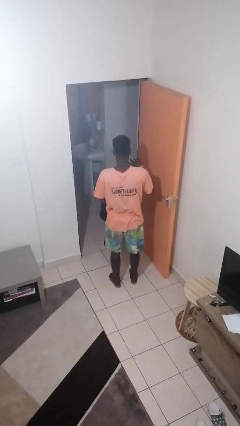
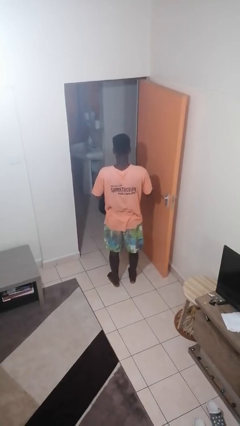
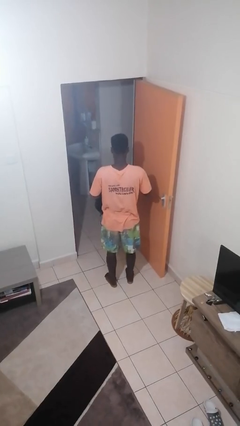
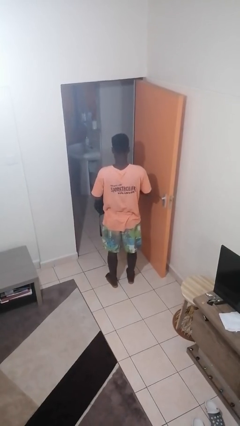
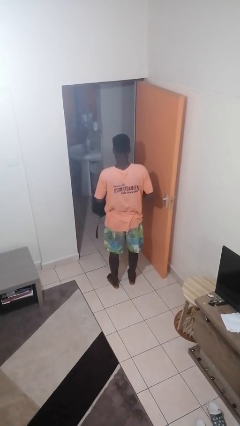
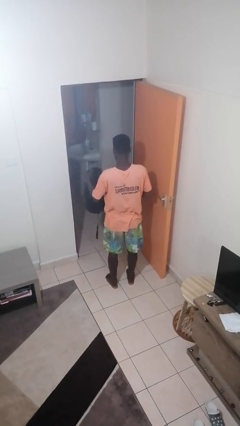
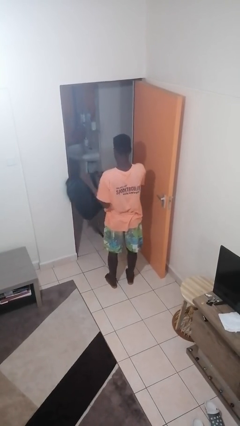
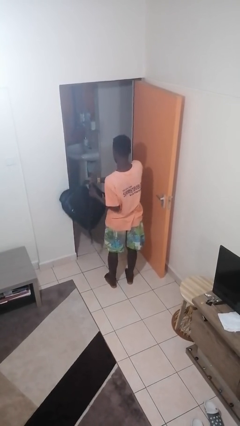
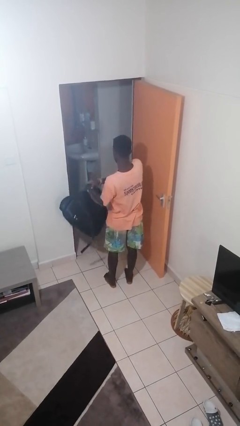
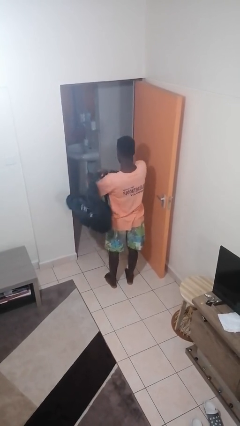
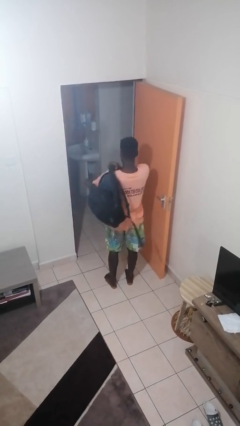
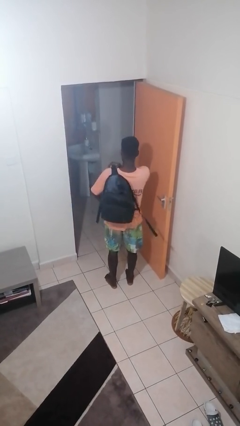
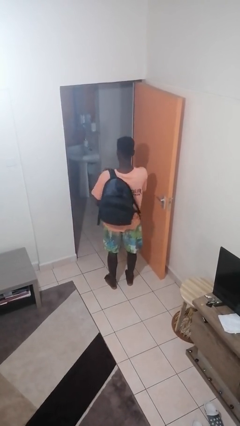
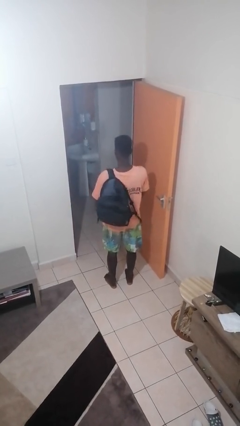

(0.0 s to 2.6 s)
person puts object into backpack

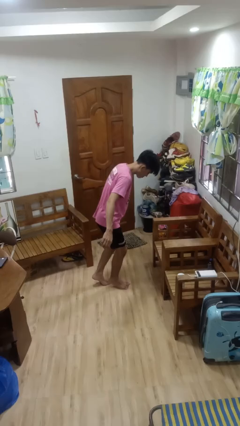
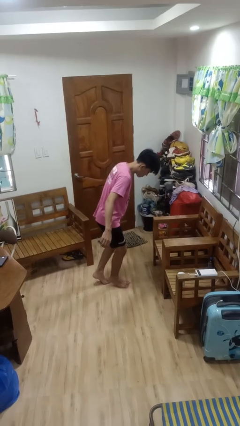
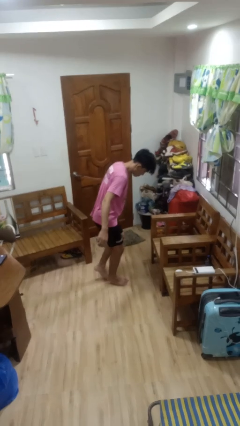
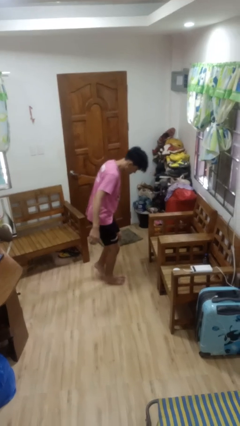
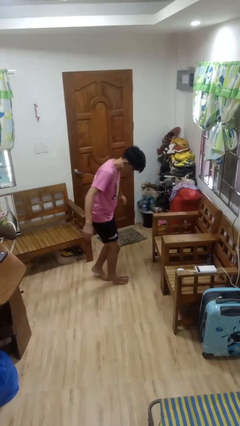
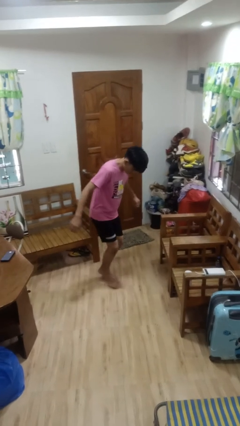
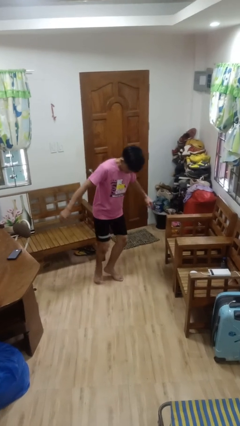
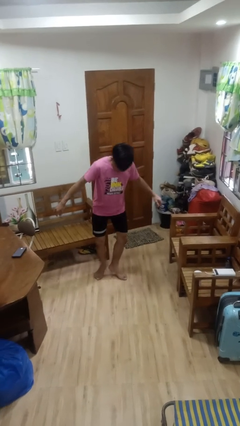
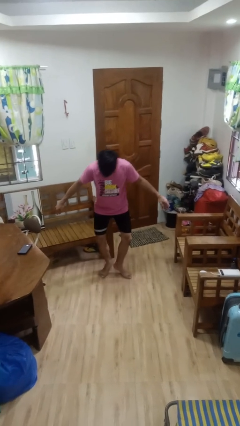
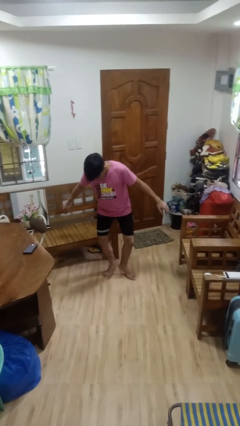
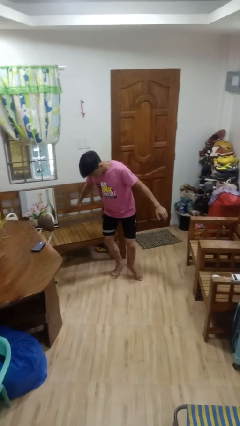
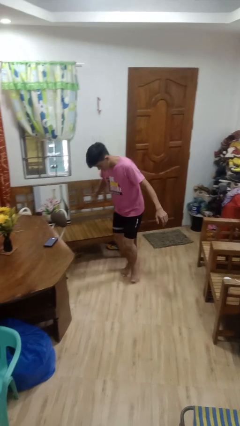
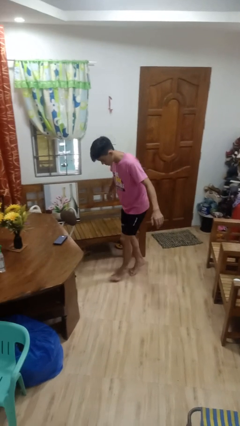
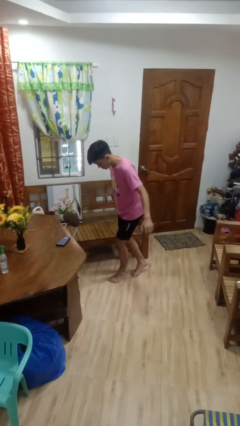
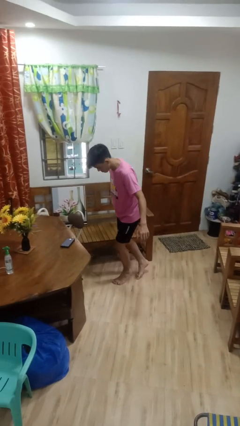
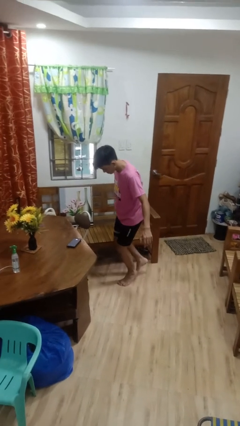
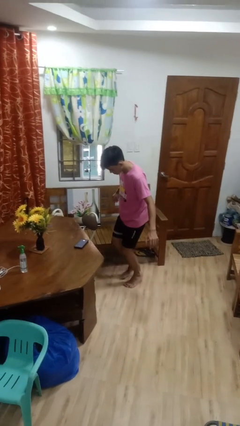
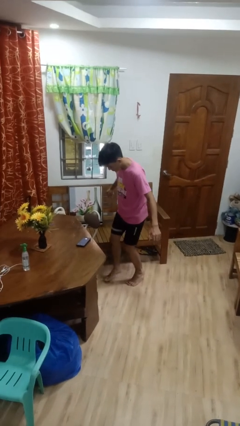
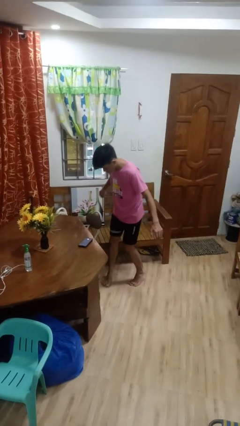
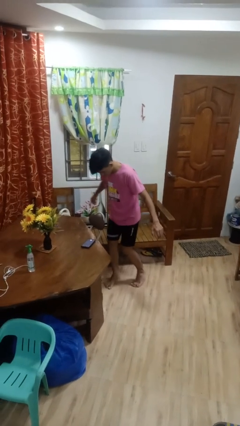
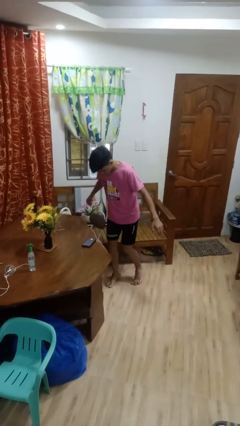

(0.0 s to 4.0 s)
person walks tiptoe

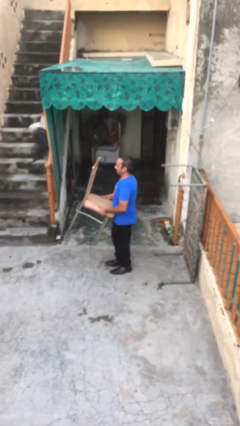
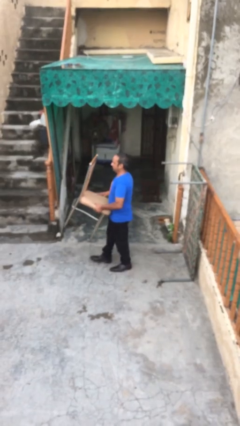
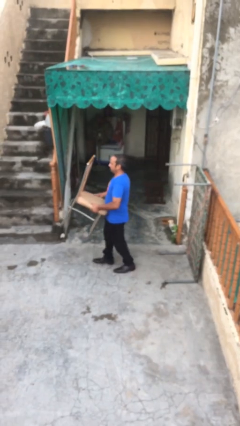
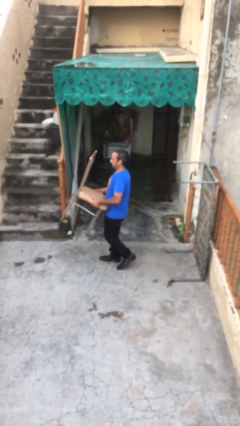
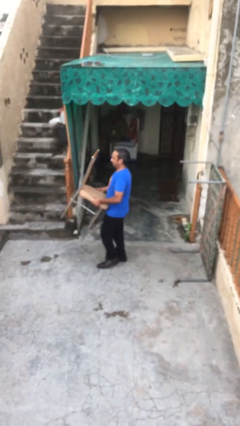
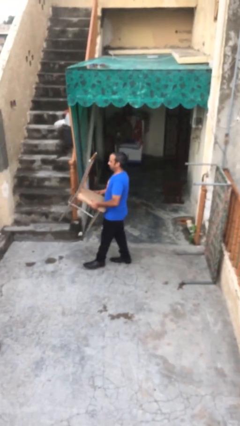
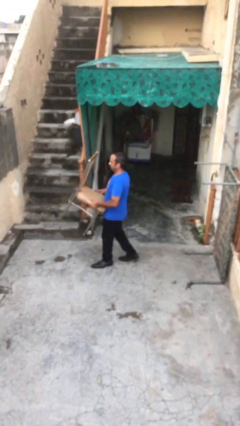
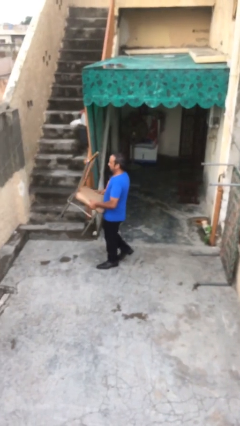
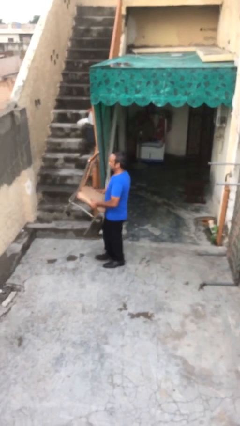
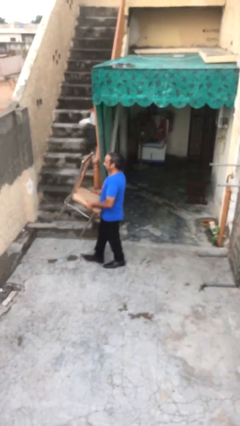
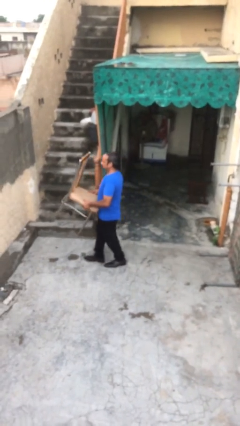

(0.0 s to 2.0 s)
person carries heavy object

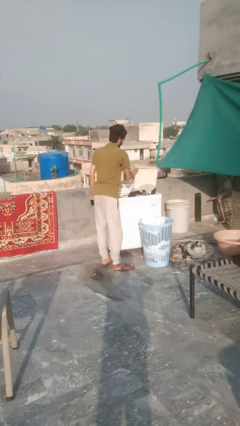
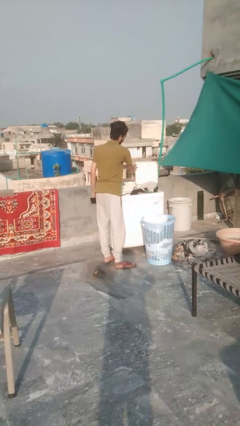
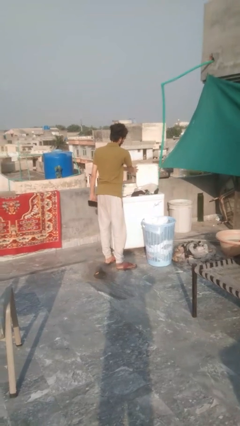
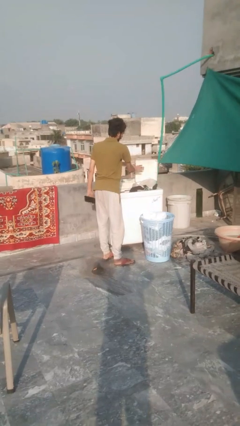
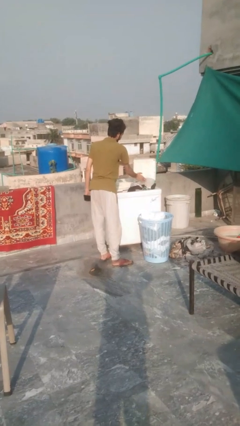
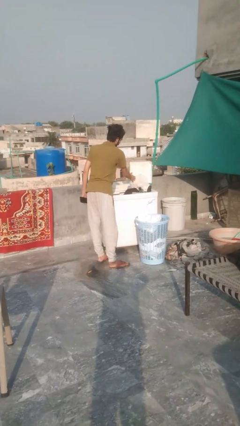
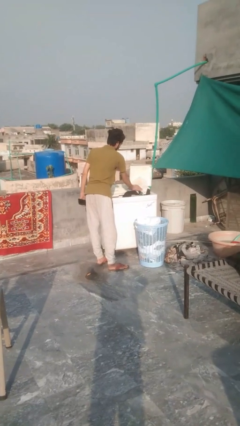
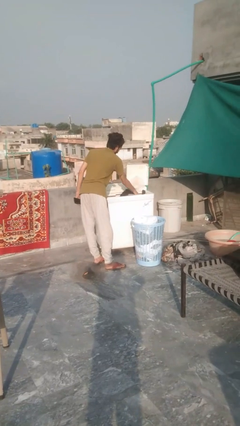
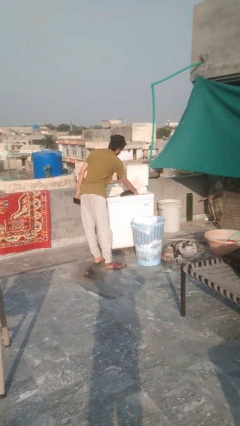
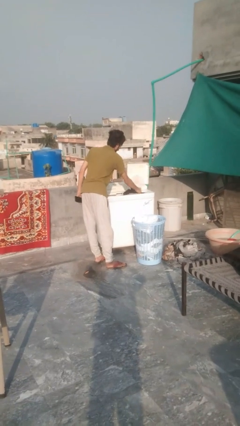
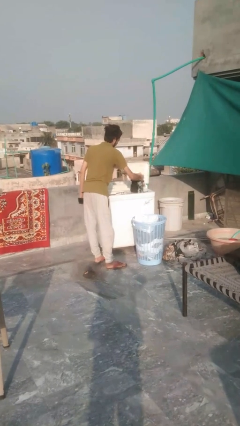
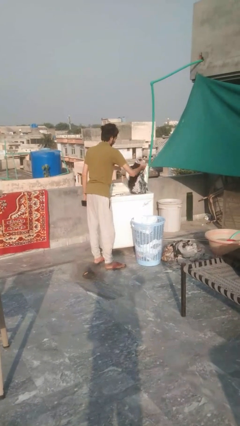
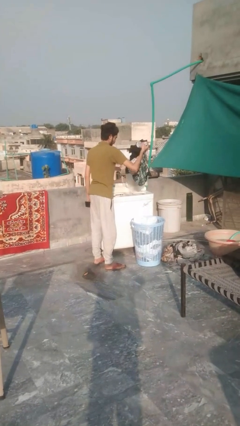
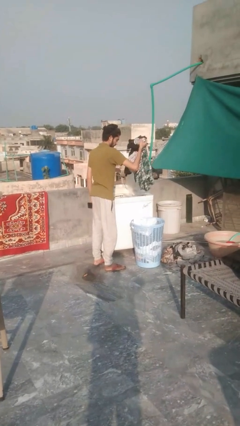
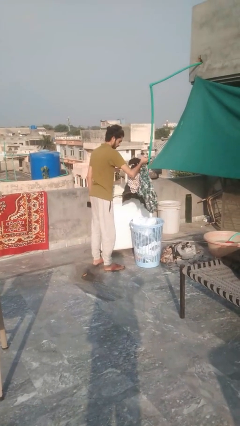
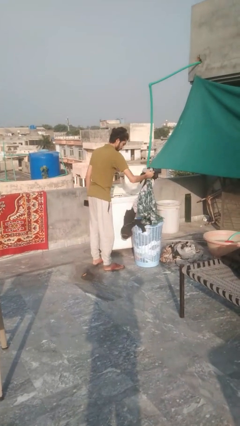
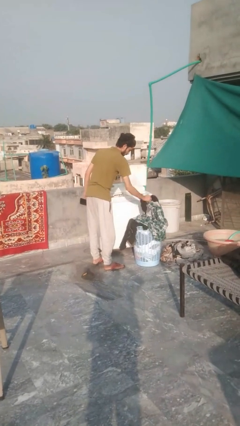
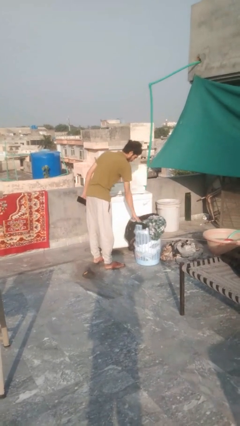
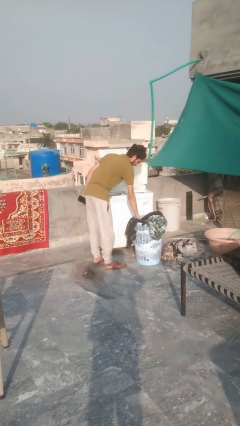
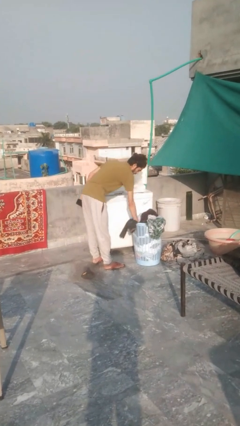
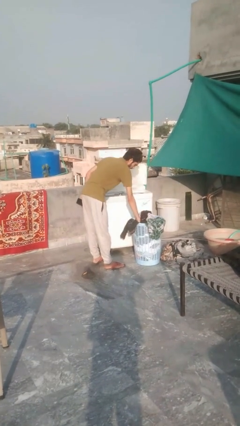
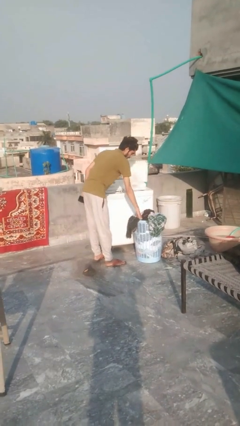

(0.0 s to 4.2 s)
person unloads clotheswasher

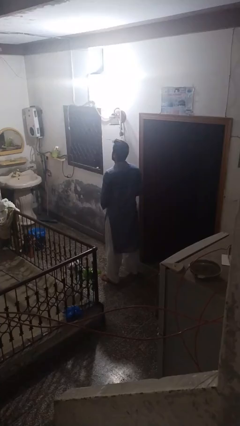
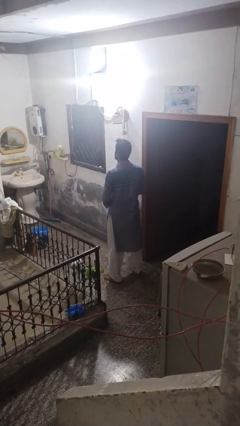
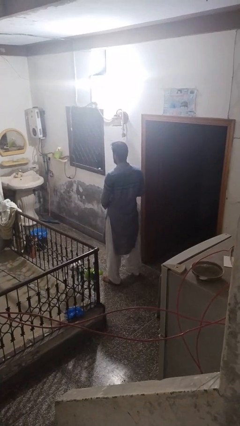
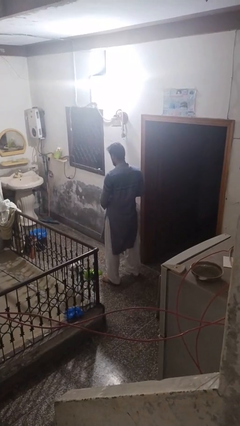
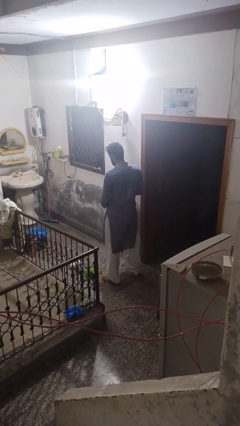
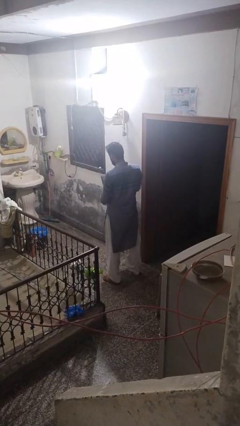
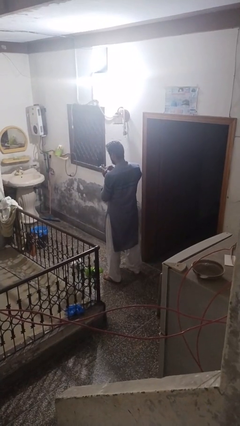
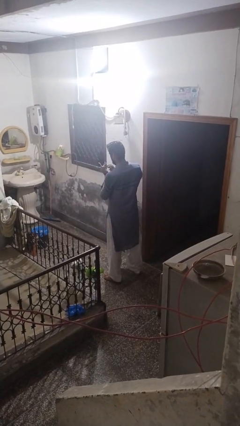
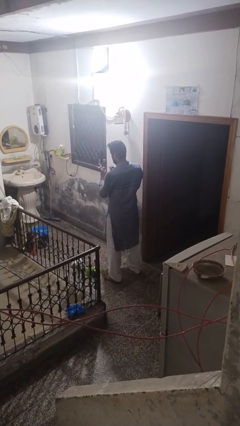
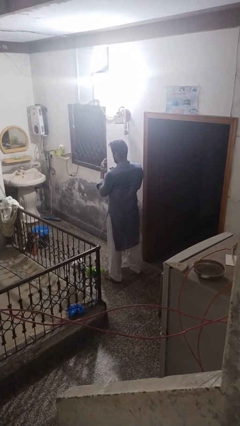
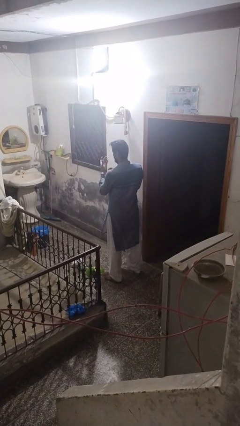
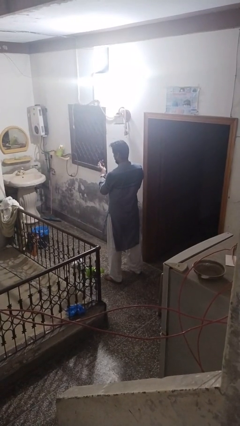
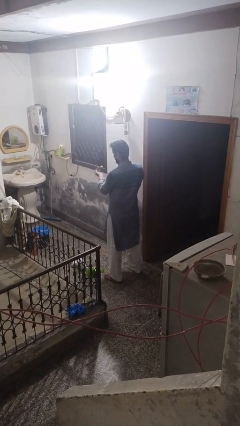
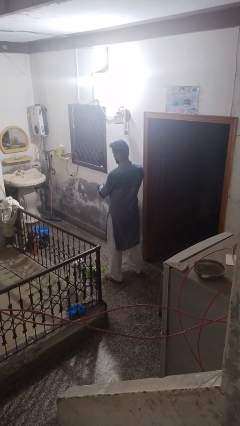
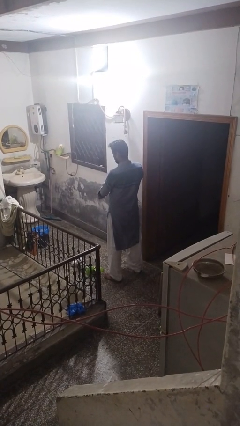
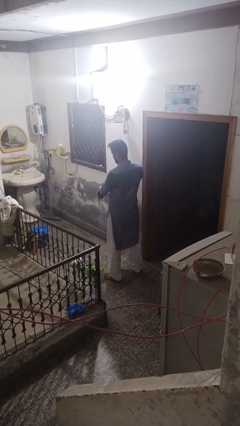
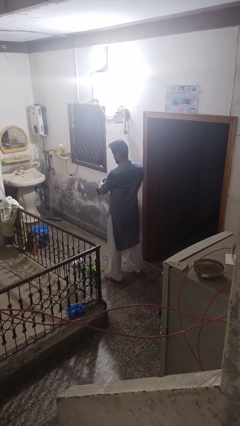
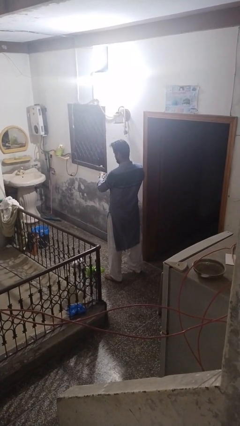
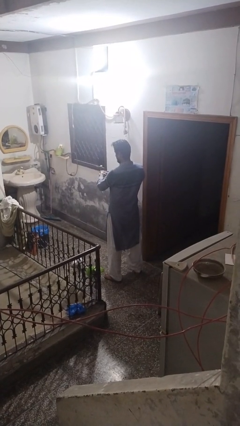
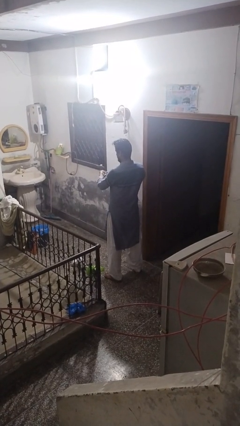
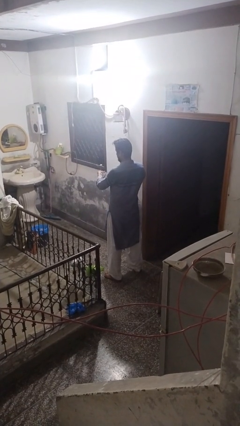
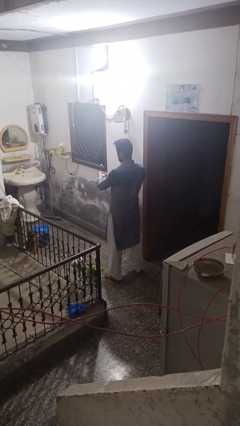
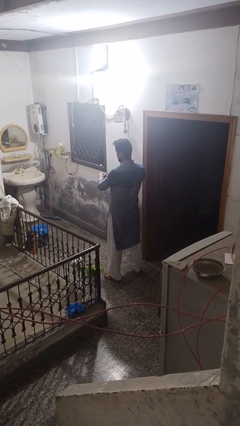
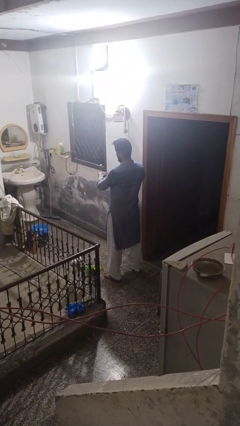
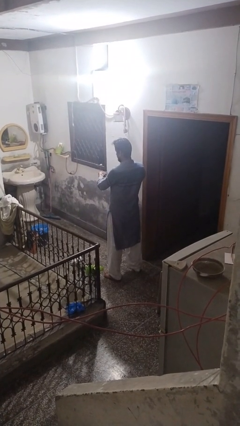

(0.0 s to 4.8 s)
person washes hands
